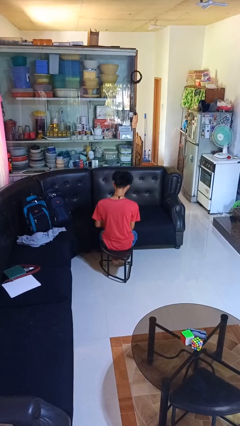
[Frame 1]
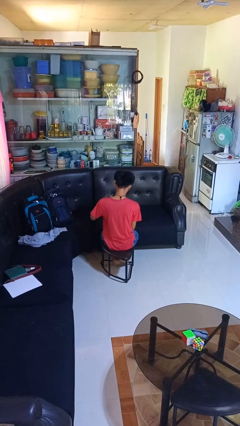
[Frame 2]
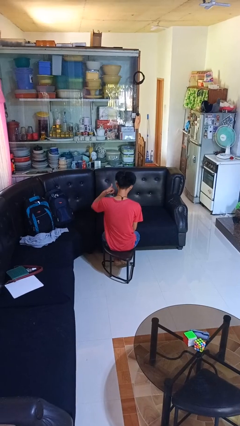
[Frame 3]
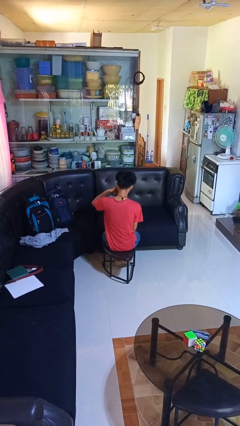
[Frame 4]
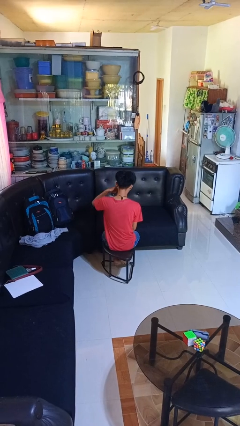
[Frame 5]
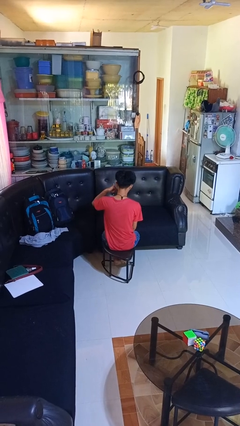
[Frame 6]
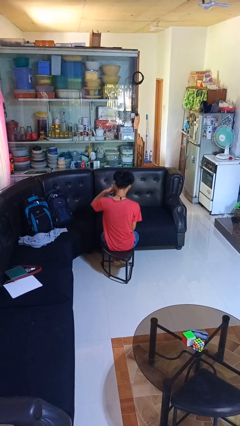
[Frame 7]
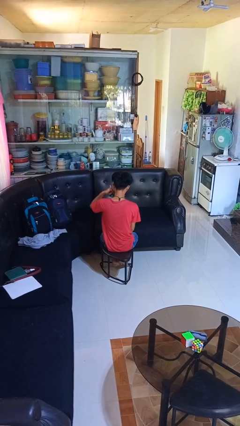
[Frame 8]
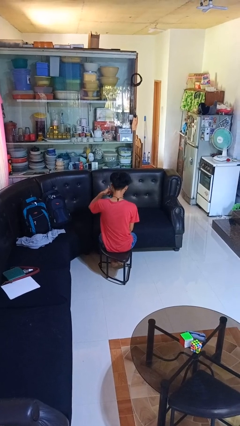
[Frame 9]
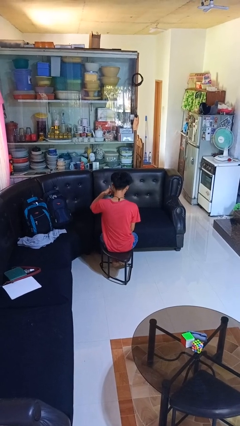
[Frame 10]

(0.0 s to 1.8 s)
person gestures call me

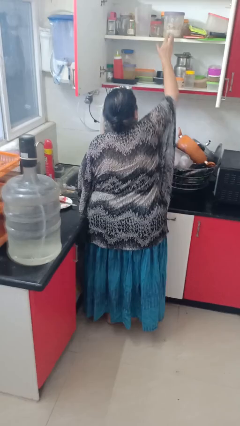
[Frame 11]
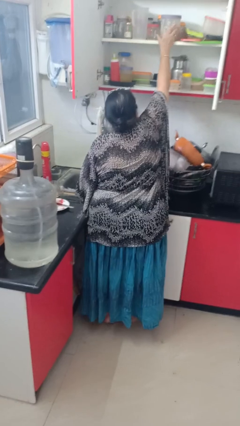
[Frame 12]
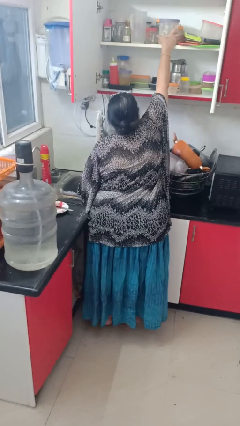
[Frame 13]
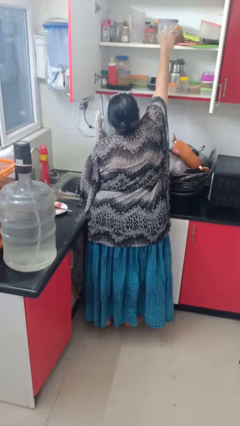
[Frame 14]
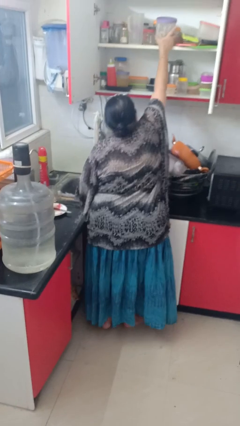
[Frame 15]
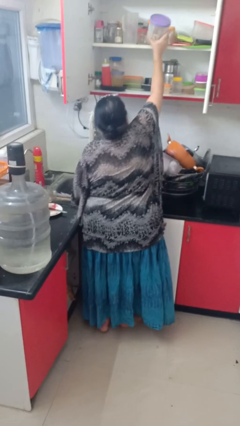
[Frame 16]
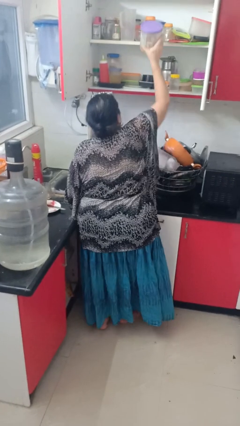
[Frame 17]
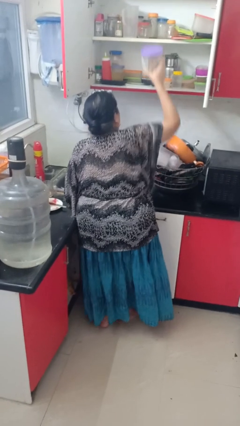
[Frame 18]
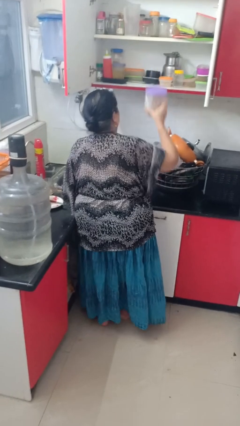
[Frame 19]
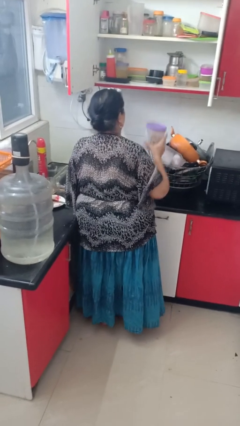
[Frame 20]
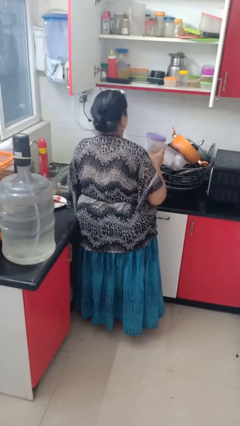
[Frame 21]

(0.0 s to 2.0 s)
person puts object in cabinet

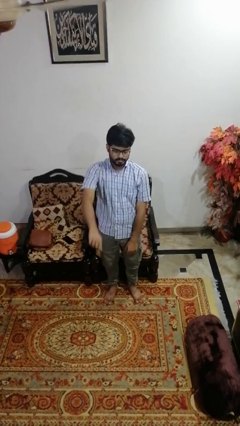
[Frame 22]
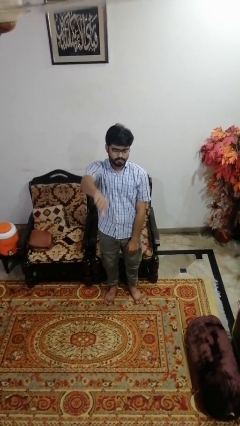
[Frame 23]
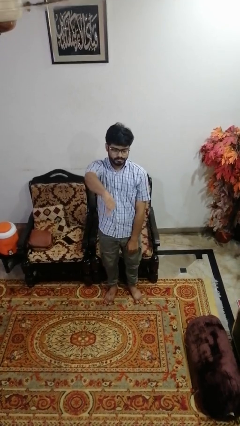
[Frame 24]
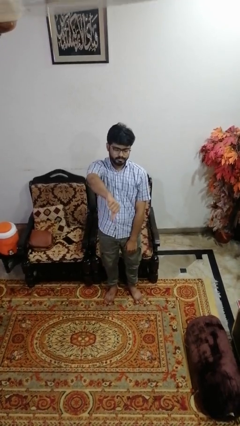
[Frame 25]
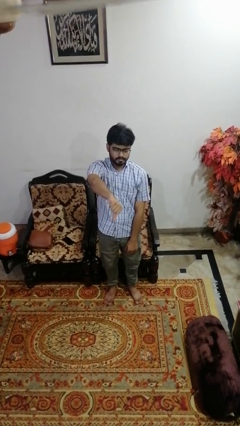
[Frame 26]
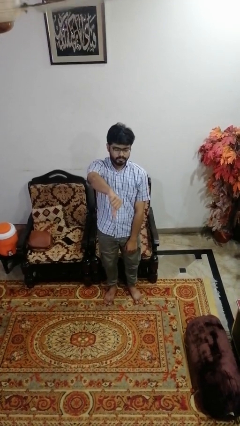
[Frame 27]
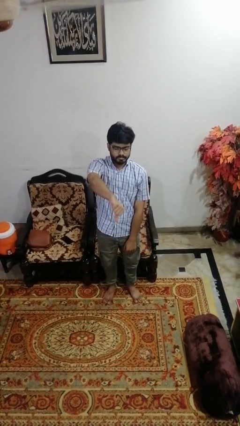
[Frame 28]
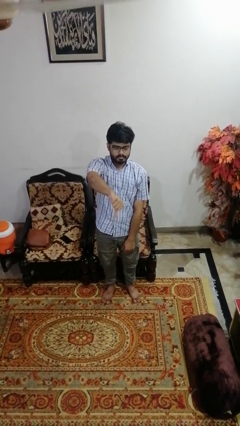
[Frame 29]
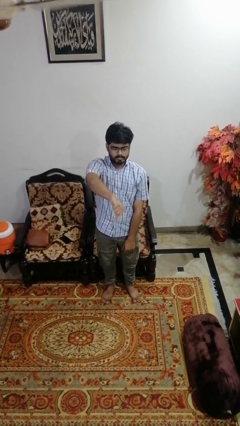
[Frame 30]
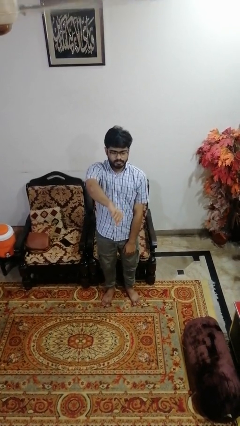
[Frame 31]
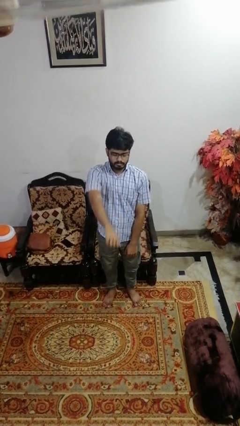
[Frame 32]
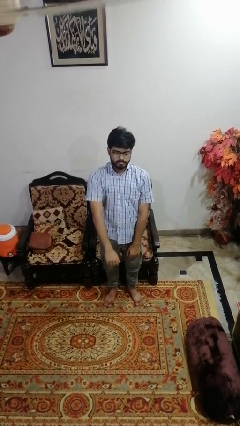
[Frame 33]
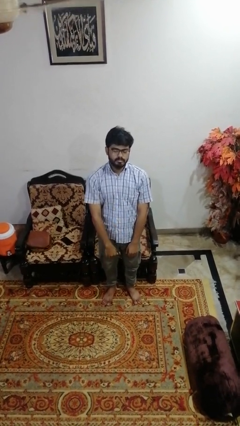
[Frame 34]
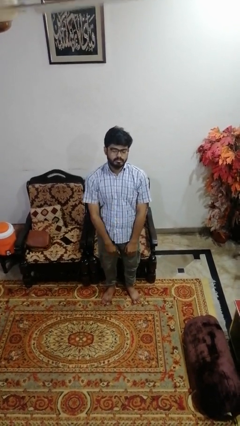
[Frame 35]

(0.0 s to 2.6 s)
person gestures thumbs down

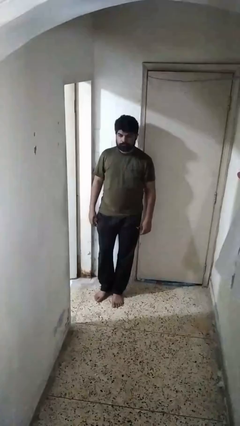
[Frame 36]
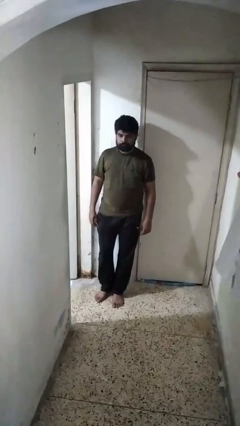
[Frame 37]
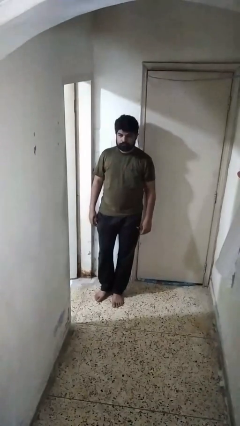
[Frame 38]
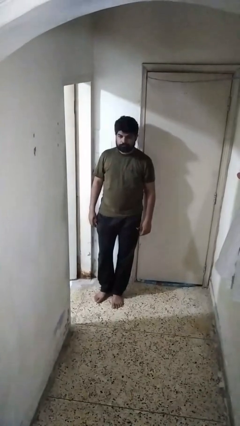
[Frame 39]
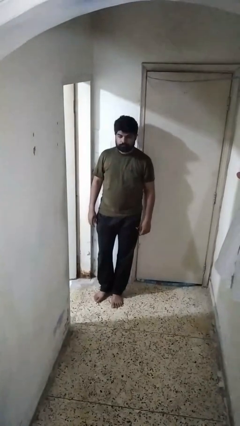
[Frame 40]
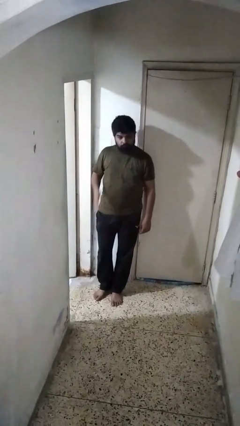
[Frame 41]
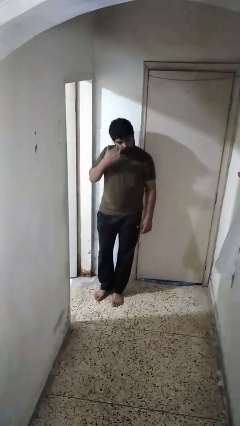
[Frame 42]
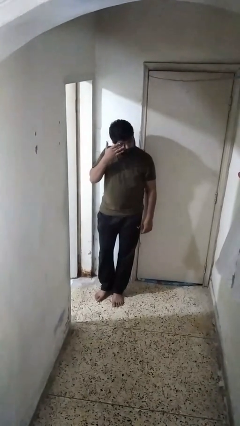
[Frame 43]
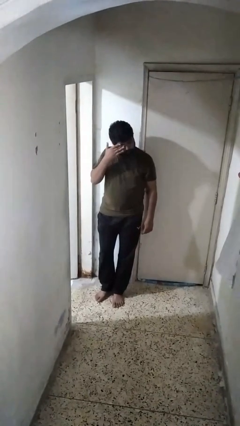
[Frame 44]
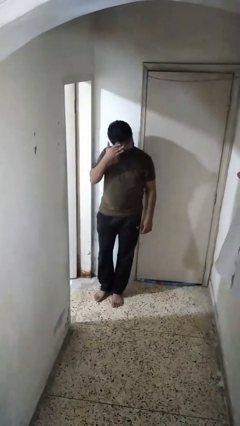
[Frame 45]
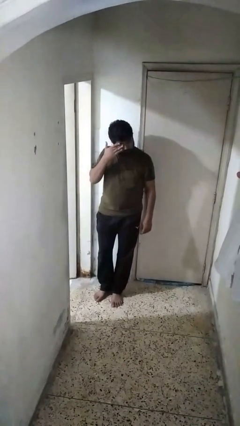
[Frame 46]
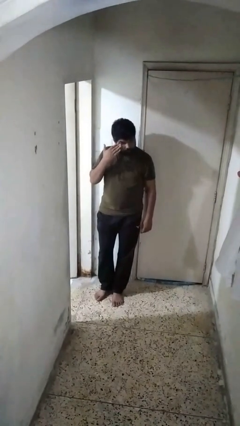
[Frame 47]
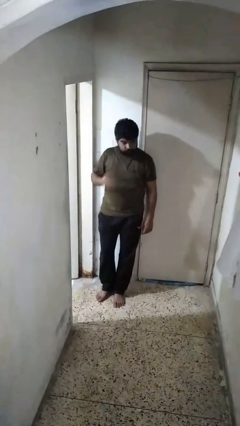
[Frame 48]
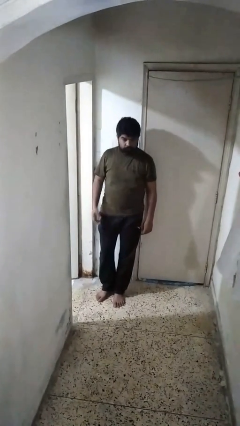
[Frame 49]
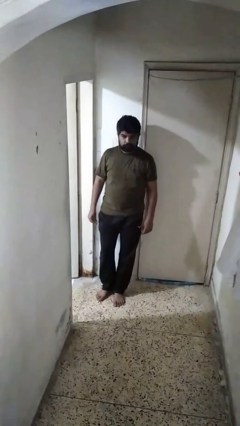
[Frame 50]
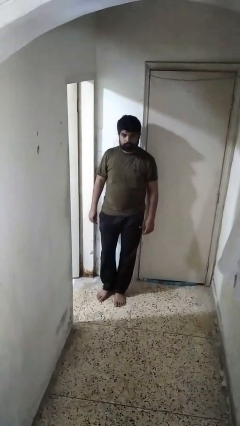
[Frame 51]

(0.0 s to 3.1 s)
person rubs eyes

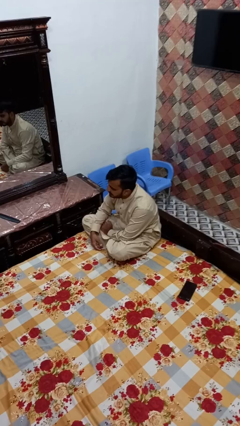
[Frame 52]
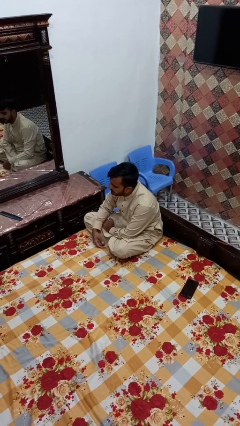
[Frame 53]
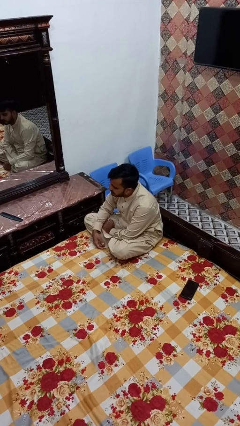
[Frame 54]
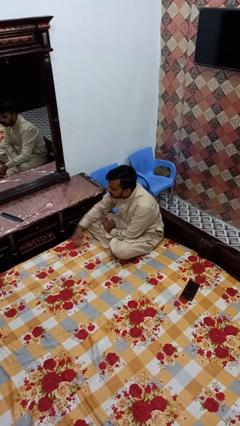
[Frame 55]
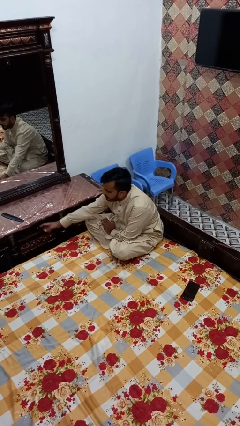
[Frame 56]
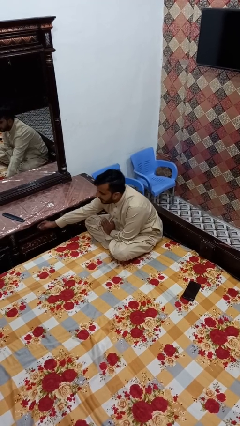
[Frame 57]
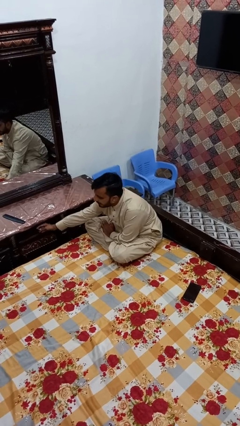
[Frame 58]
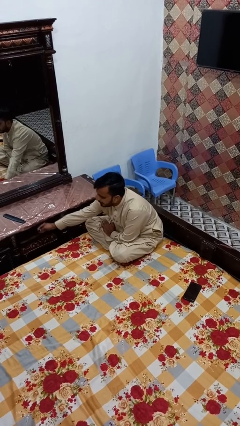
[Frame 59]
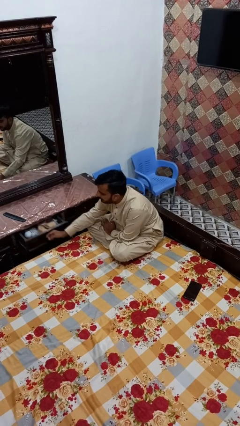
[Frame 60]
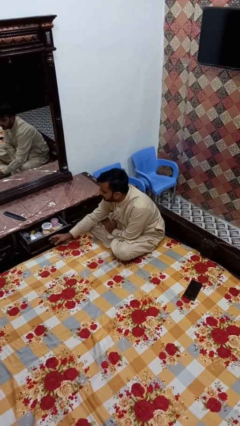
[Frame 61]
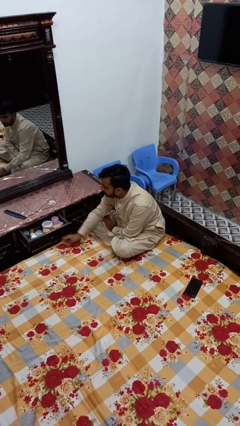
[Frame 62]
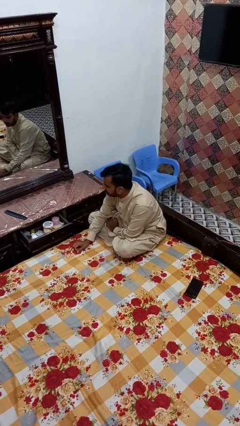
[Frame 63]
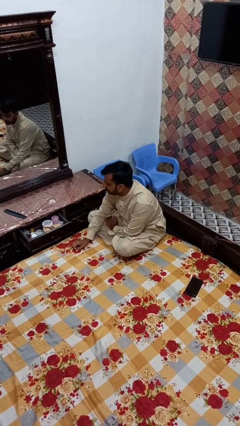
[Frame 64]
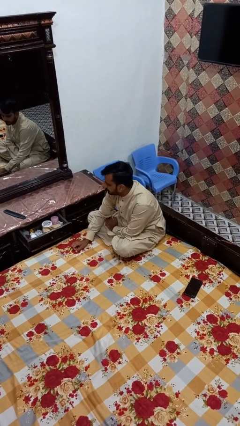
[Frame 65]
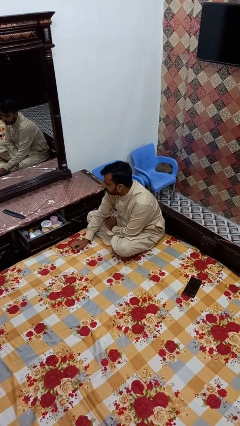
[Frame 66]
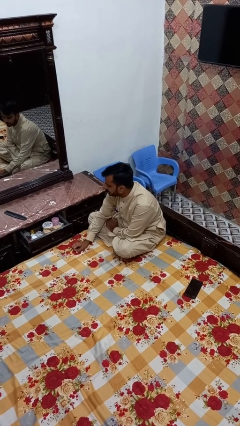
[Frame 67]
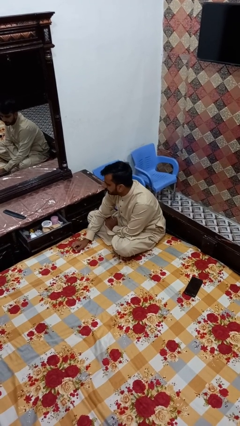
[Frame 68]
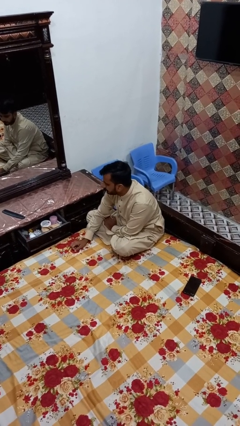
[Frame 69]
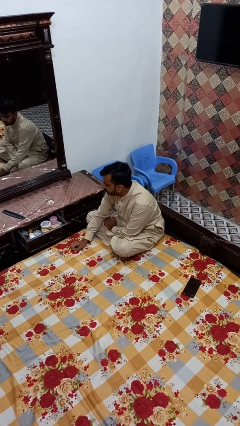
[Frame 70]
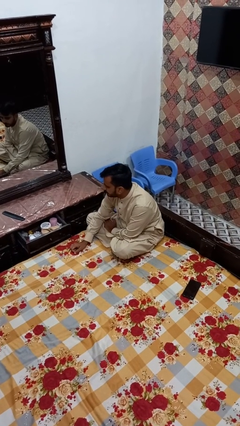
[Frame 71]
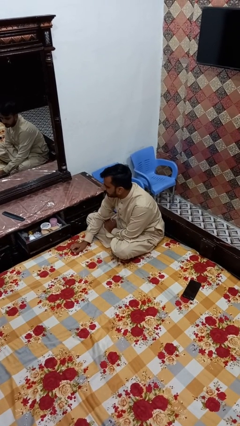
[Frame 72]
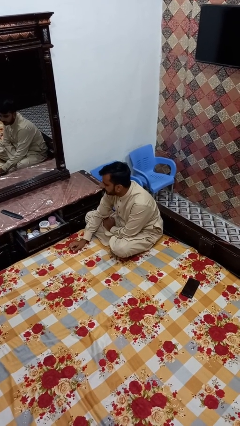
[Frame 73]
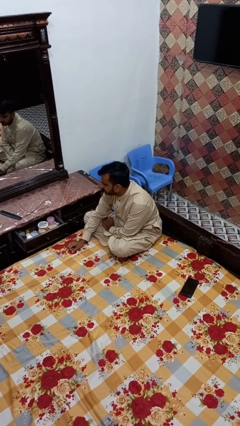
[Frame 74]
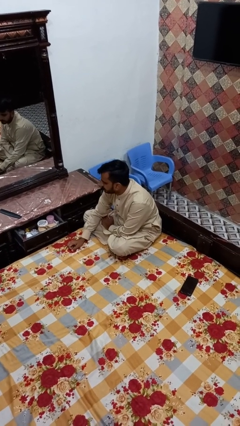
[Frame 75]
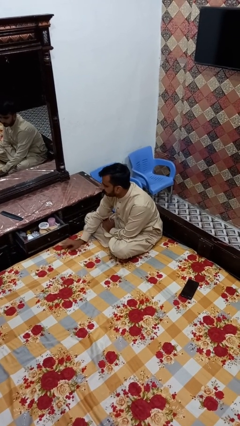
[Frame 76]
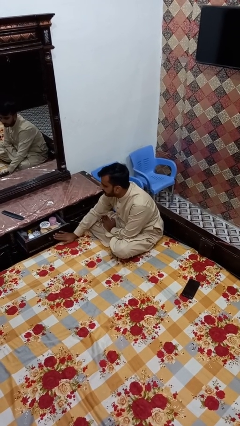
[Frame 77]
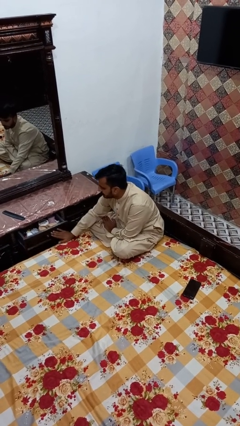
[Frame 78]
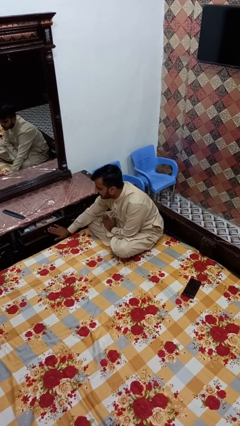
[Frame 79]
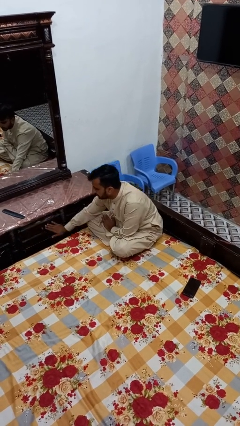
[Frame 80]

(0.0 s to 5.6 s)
person opens dresser drawer

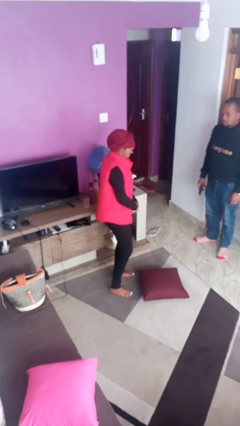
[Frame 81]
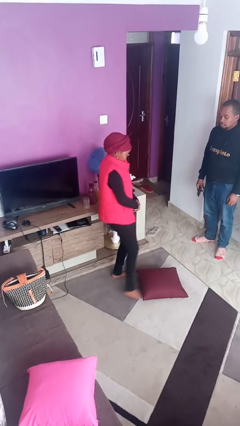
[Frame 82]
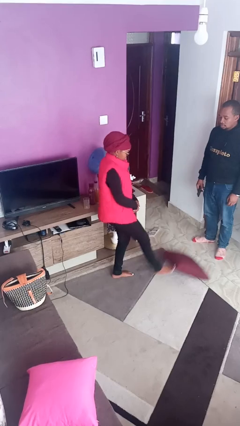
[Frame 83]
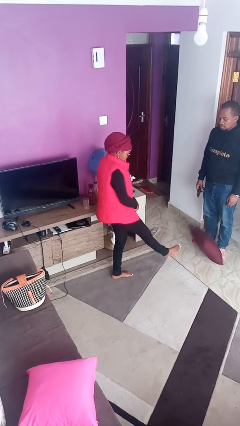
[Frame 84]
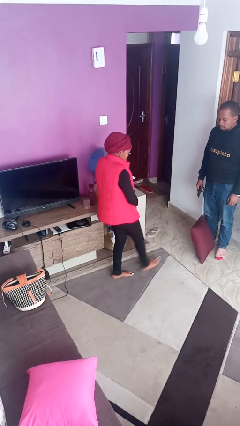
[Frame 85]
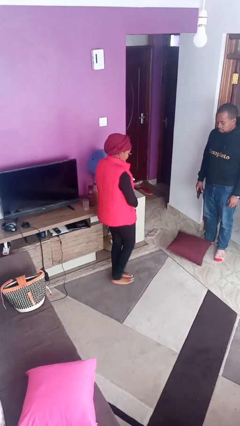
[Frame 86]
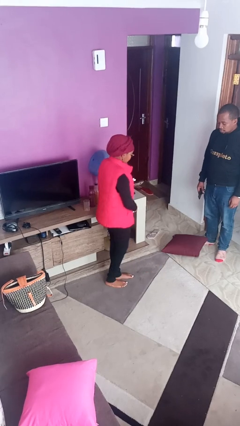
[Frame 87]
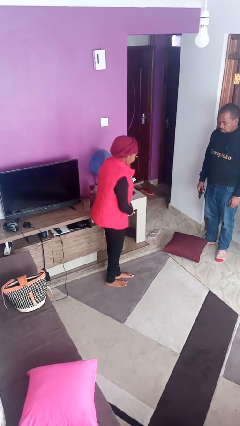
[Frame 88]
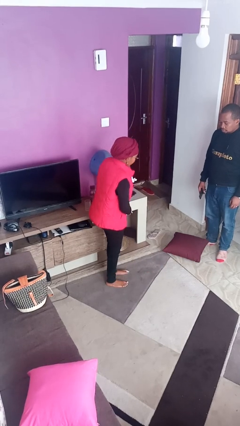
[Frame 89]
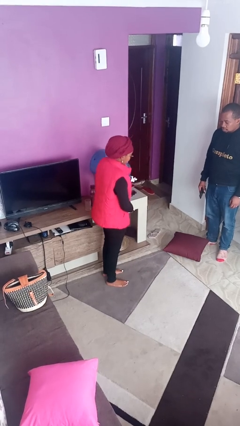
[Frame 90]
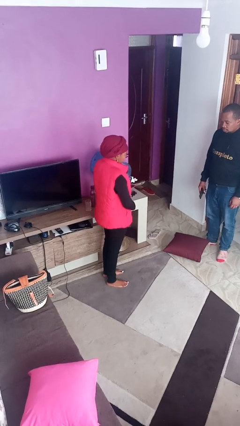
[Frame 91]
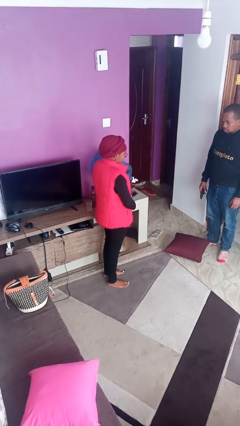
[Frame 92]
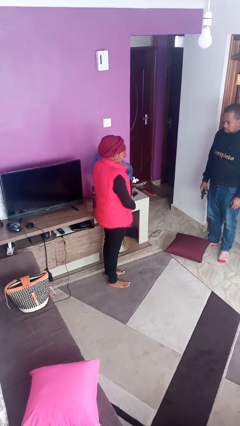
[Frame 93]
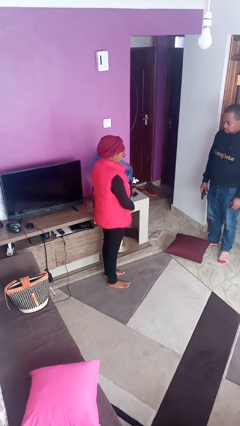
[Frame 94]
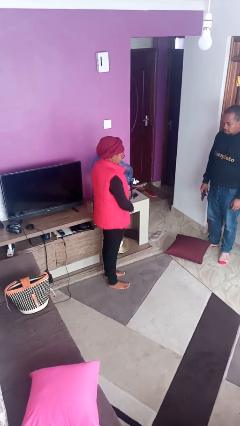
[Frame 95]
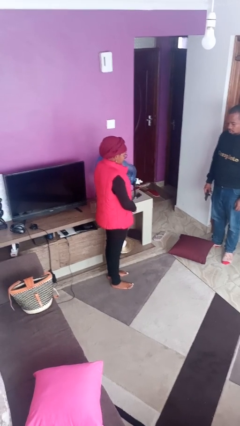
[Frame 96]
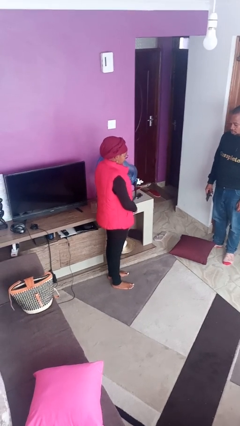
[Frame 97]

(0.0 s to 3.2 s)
person kicks object to person
